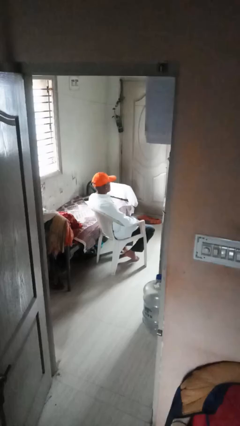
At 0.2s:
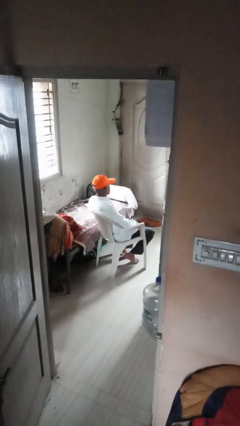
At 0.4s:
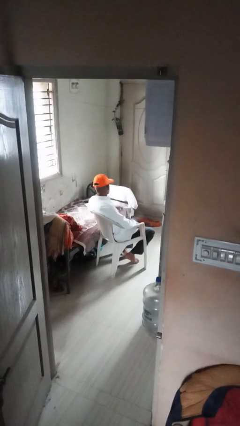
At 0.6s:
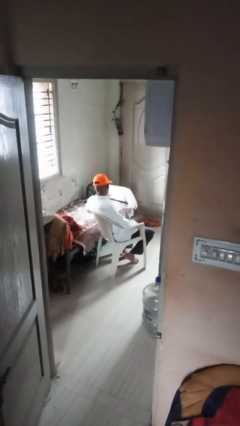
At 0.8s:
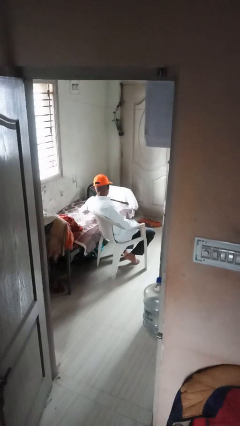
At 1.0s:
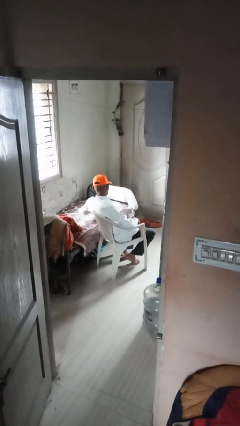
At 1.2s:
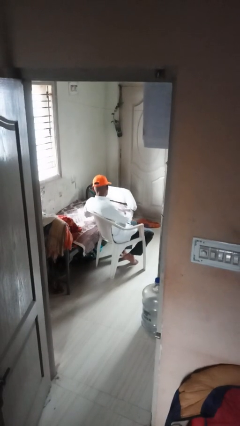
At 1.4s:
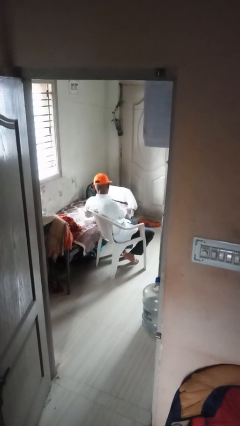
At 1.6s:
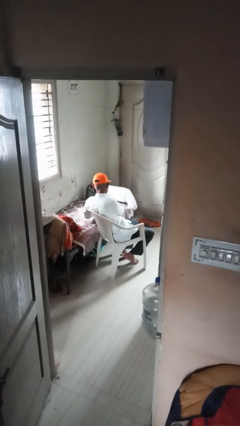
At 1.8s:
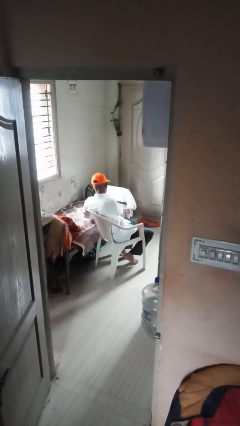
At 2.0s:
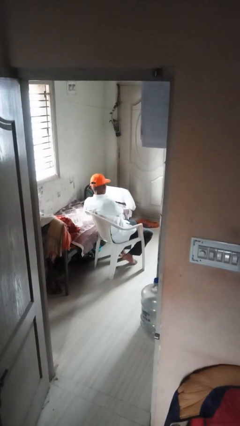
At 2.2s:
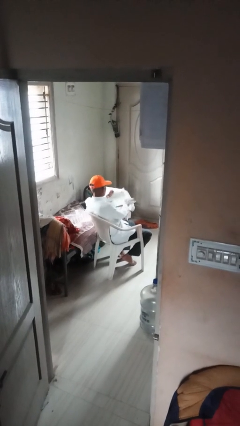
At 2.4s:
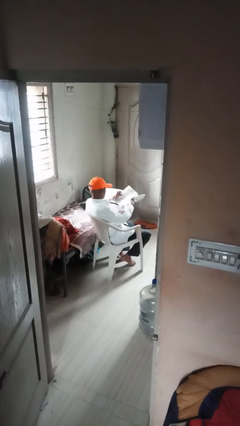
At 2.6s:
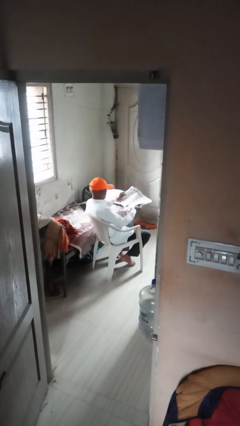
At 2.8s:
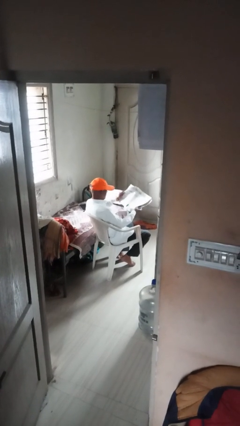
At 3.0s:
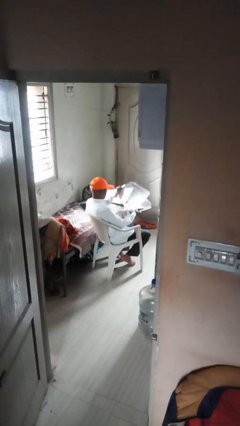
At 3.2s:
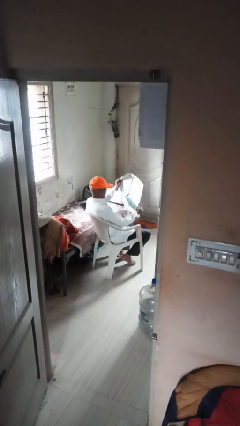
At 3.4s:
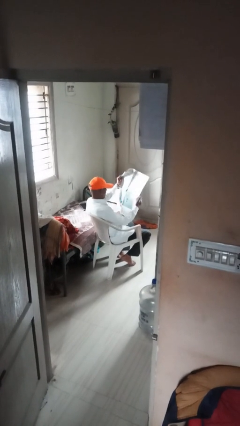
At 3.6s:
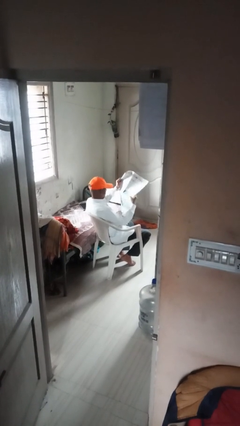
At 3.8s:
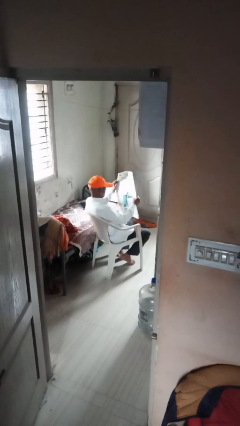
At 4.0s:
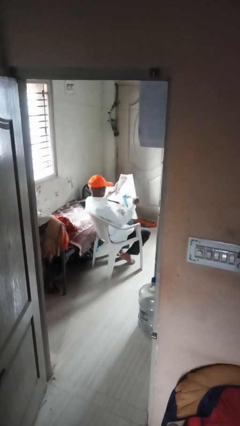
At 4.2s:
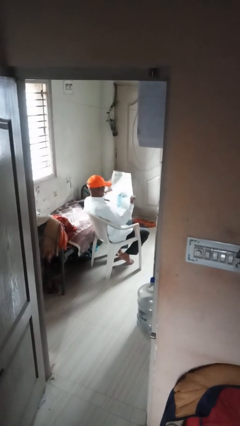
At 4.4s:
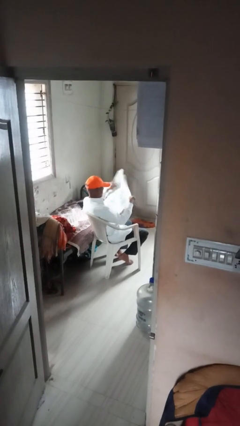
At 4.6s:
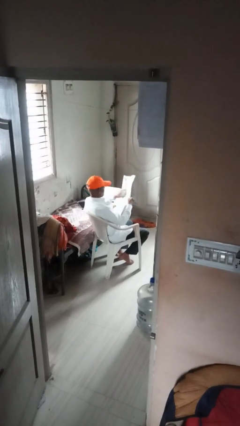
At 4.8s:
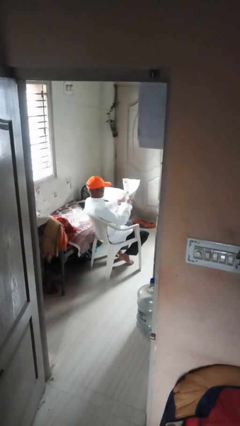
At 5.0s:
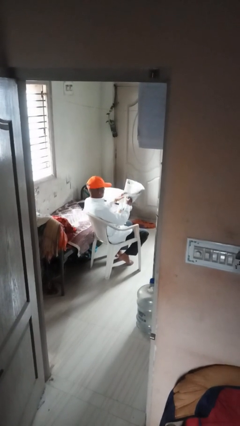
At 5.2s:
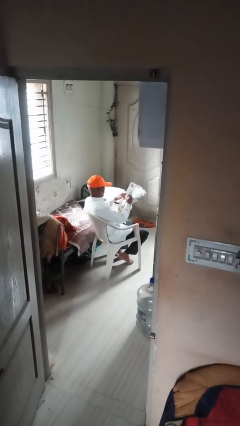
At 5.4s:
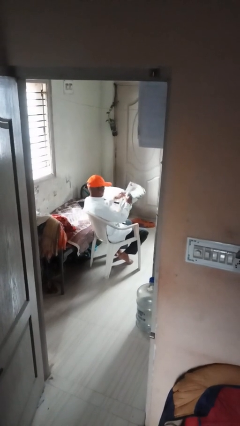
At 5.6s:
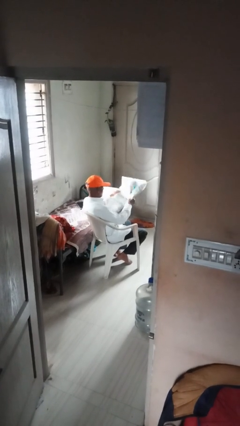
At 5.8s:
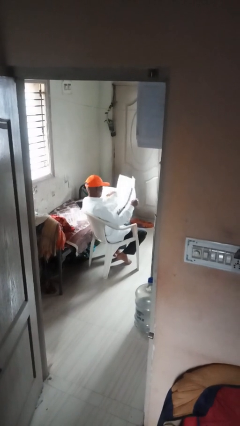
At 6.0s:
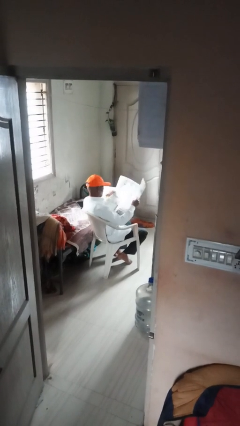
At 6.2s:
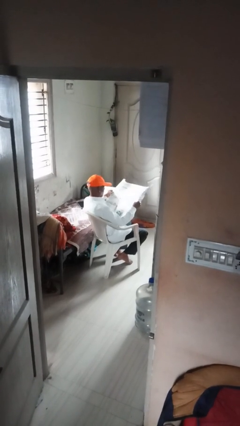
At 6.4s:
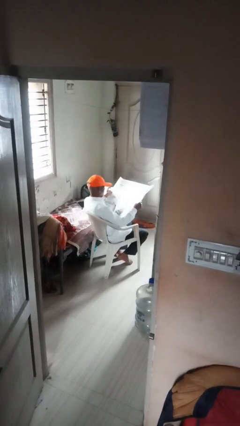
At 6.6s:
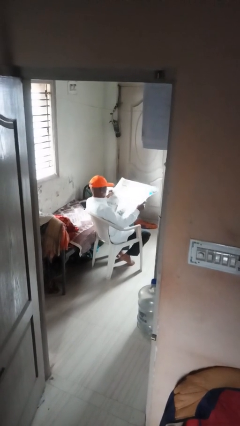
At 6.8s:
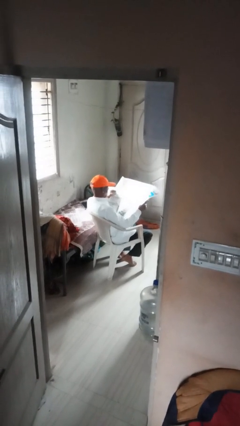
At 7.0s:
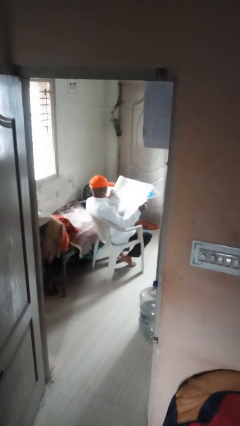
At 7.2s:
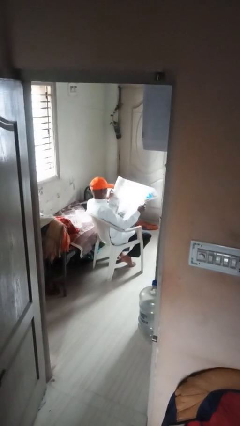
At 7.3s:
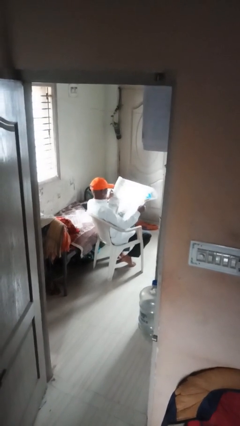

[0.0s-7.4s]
person reads newspaper

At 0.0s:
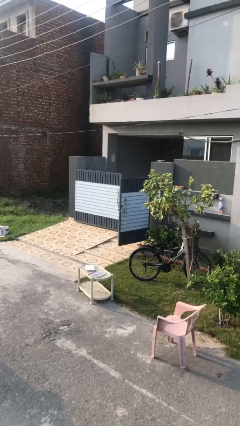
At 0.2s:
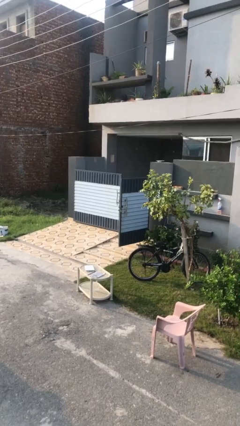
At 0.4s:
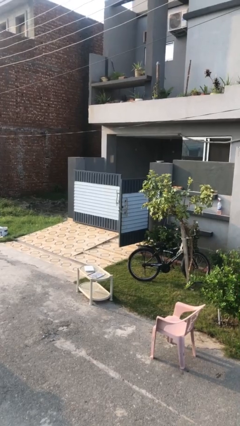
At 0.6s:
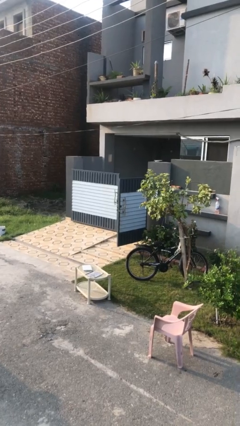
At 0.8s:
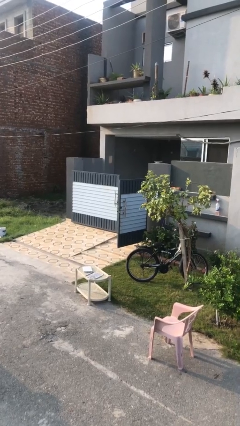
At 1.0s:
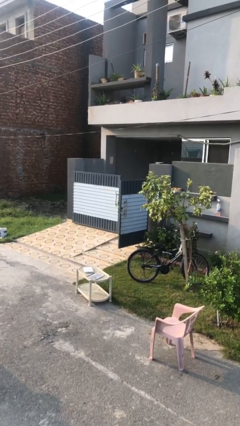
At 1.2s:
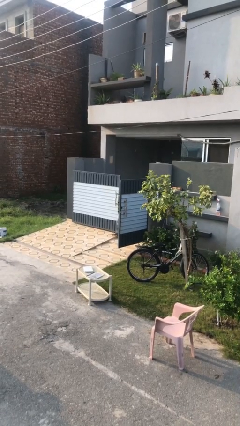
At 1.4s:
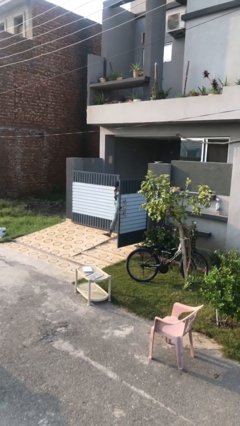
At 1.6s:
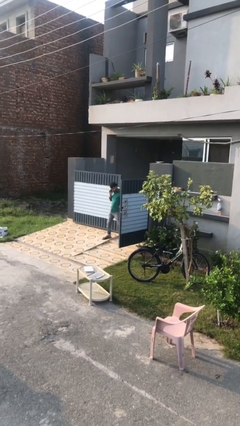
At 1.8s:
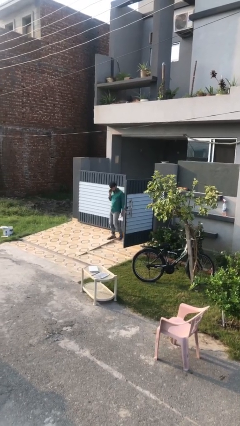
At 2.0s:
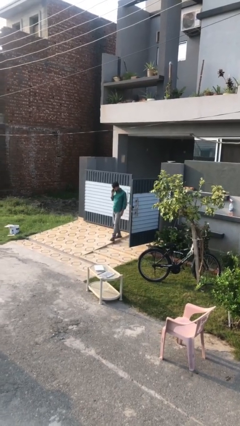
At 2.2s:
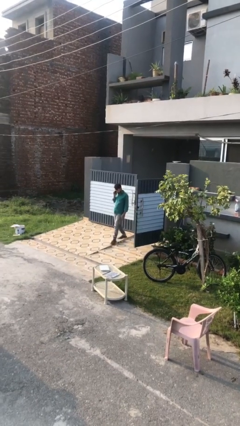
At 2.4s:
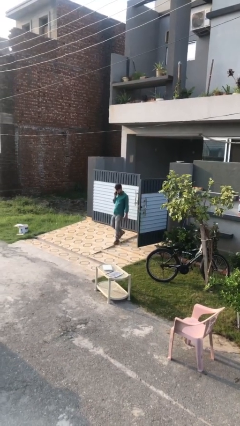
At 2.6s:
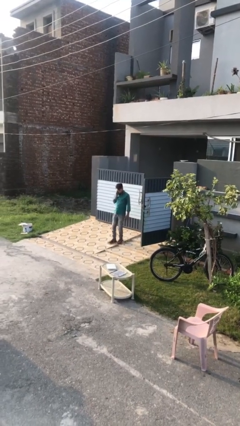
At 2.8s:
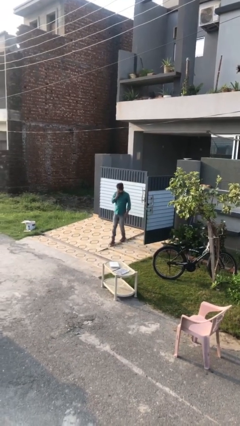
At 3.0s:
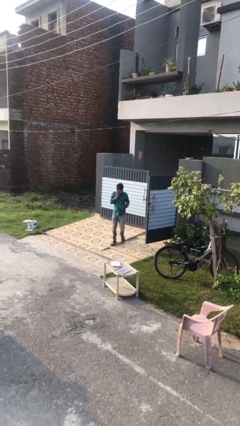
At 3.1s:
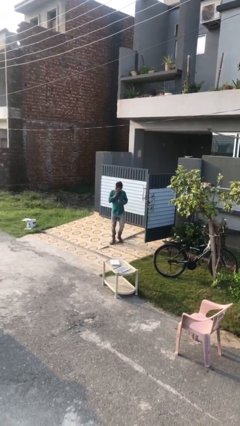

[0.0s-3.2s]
person enters scene through structure

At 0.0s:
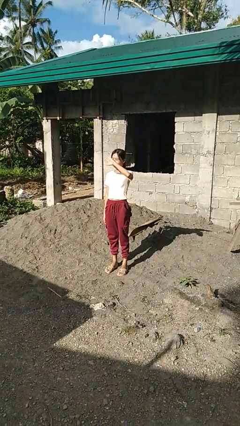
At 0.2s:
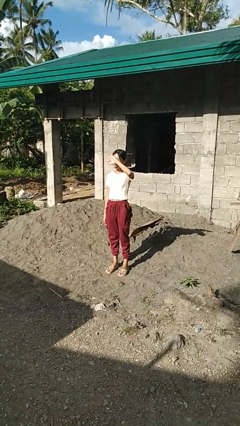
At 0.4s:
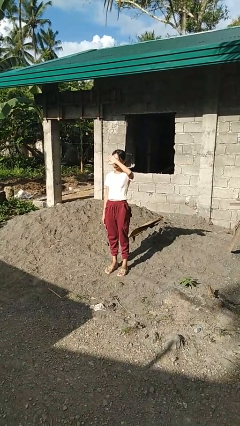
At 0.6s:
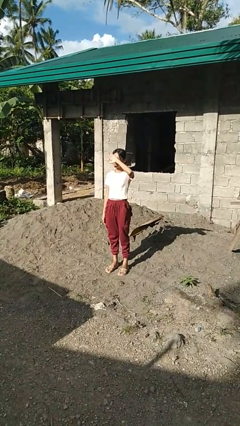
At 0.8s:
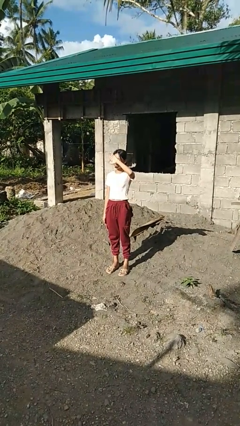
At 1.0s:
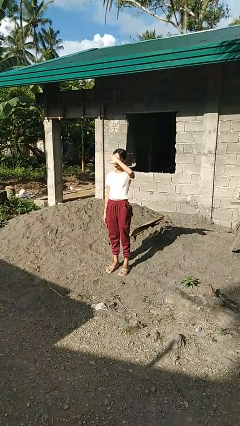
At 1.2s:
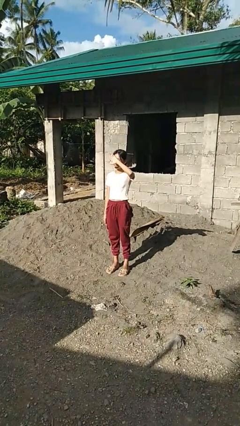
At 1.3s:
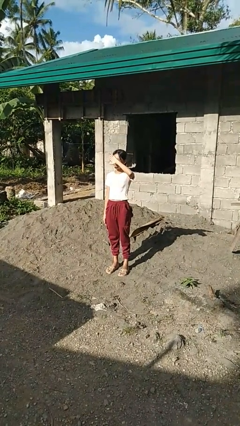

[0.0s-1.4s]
person shades eyes

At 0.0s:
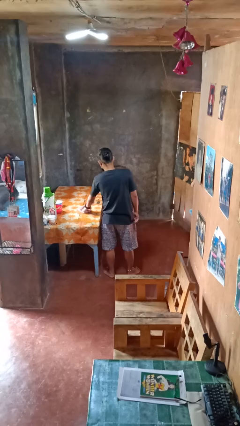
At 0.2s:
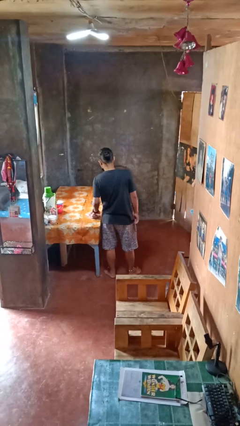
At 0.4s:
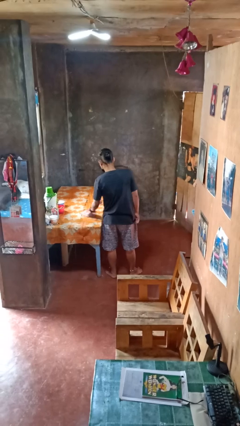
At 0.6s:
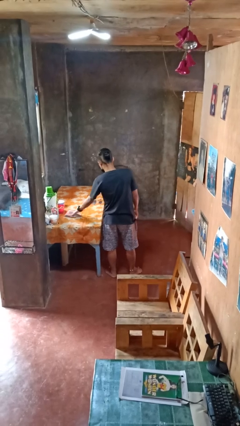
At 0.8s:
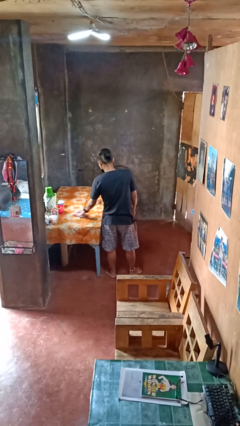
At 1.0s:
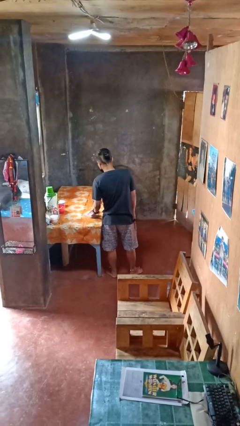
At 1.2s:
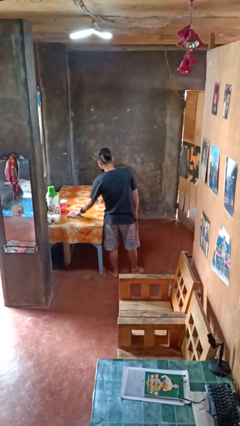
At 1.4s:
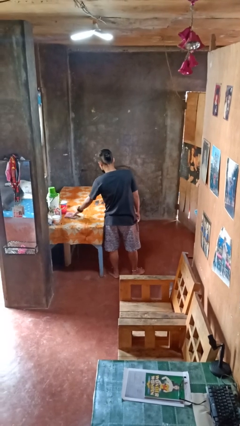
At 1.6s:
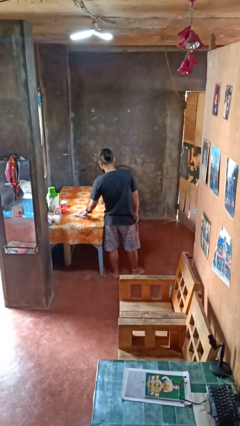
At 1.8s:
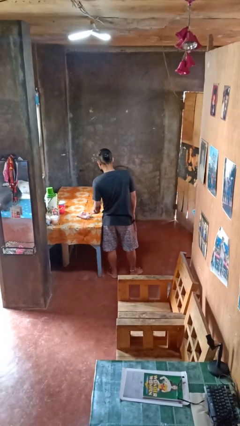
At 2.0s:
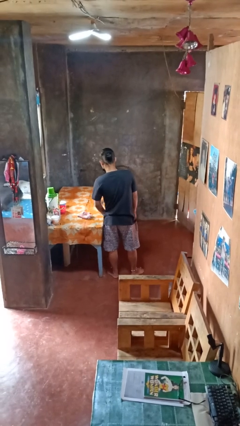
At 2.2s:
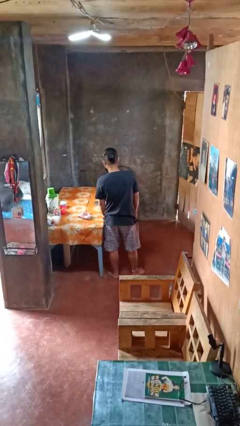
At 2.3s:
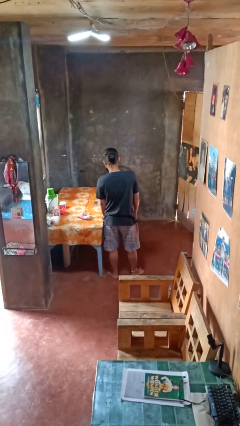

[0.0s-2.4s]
person cleans table with rag

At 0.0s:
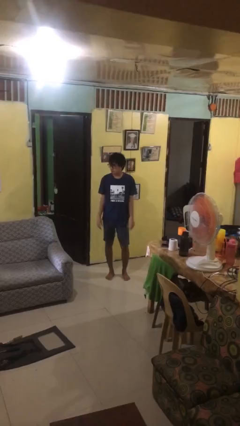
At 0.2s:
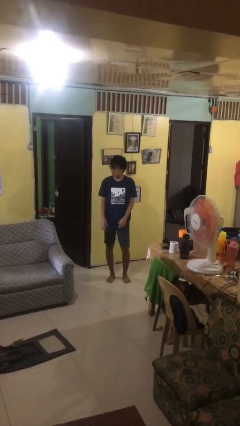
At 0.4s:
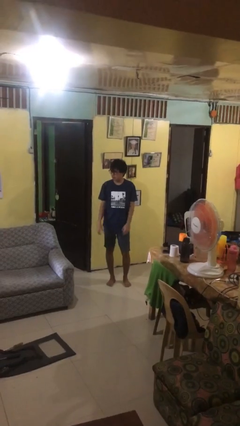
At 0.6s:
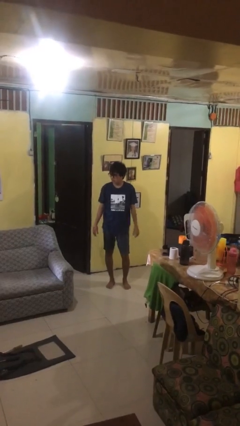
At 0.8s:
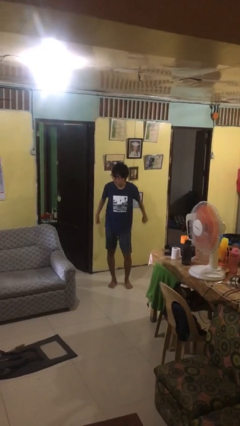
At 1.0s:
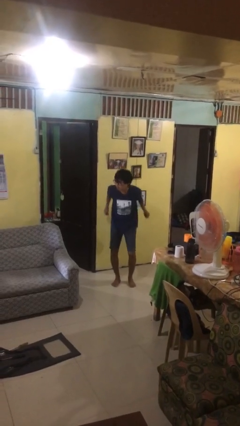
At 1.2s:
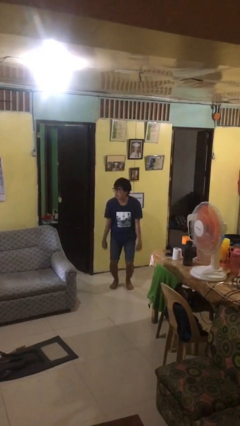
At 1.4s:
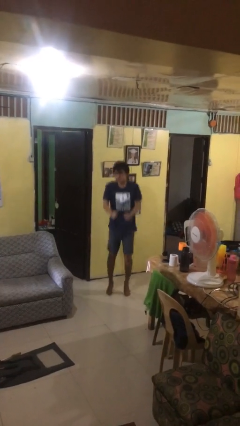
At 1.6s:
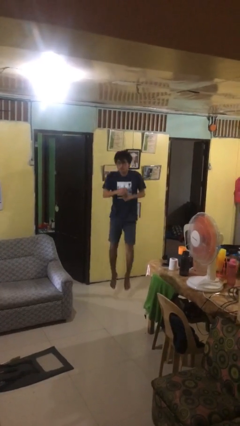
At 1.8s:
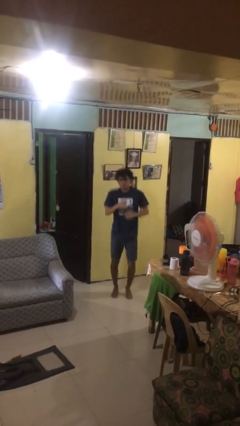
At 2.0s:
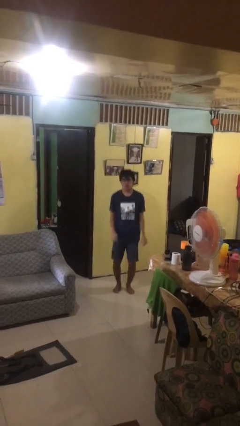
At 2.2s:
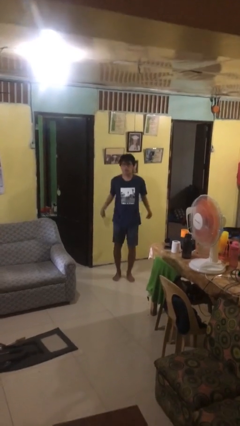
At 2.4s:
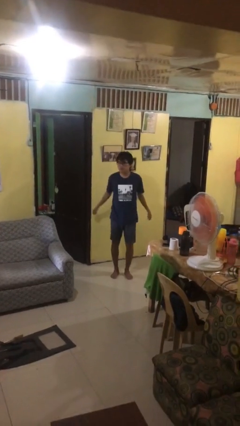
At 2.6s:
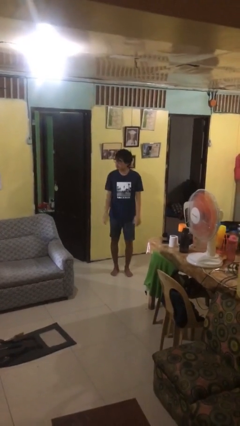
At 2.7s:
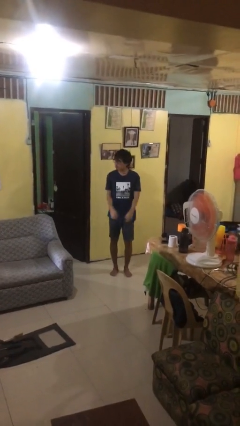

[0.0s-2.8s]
person jumps

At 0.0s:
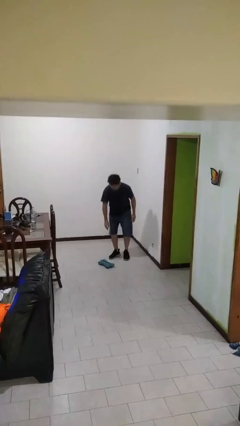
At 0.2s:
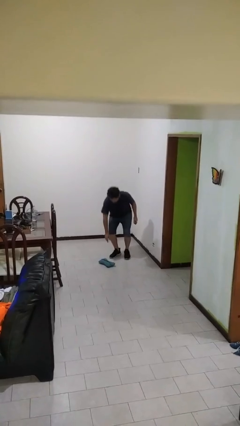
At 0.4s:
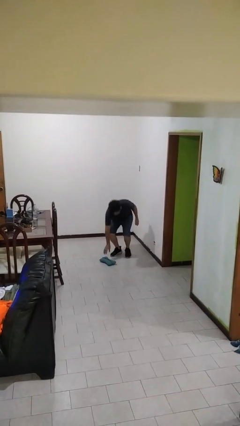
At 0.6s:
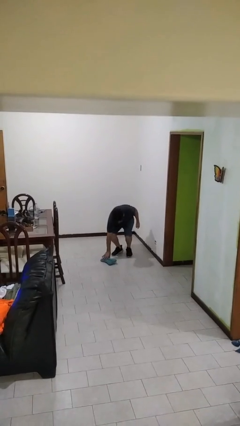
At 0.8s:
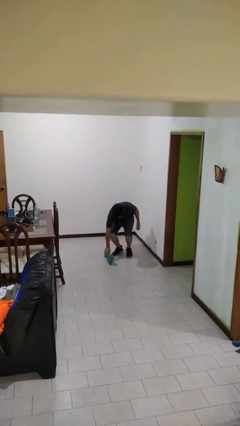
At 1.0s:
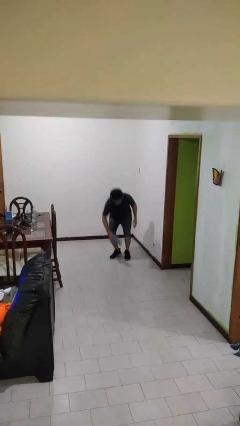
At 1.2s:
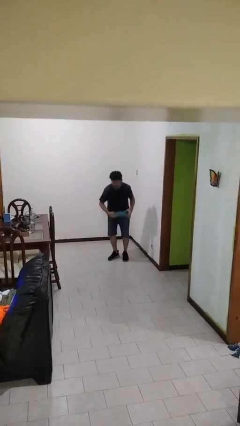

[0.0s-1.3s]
person picks up object from floor
